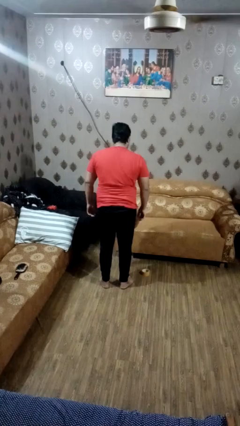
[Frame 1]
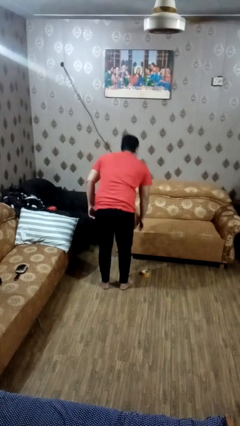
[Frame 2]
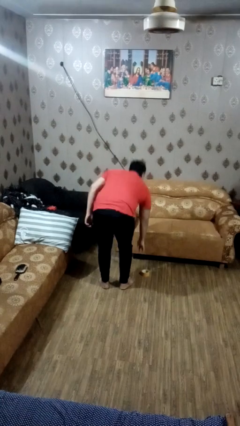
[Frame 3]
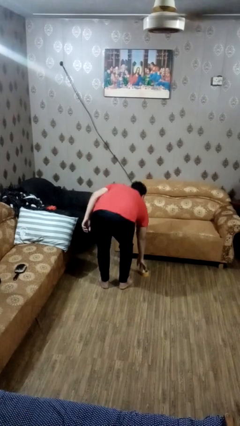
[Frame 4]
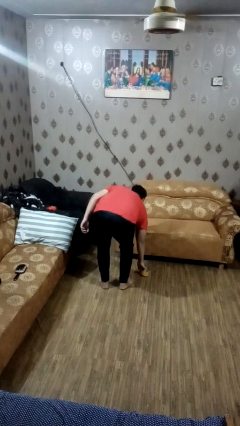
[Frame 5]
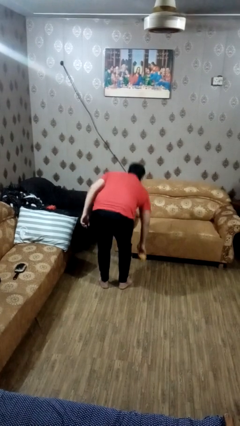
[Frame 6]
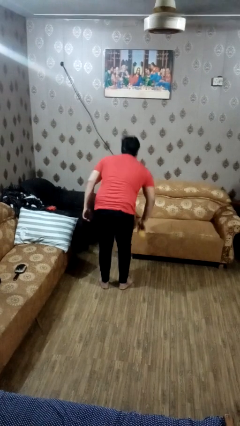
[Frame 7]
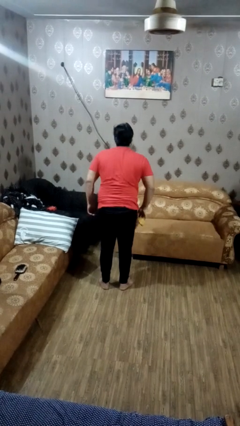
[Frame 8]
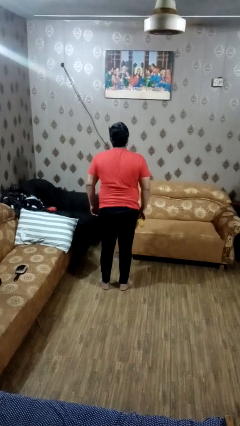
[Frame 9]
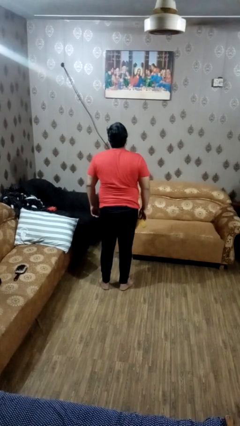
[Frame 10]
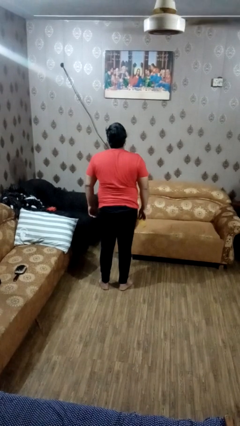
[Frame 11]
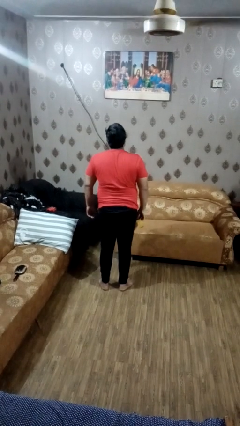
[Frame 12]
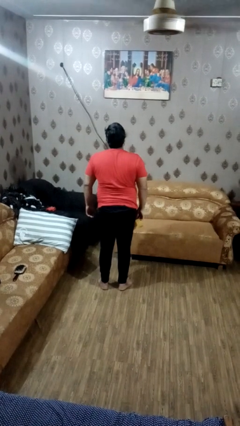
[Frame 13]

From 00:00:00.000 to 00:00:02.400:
person picks up object from floor

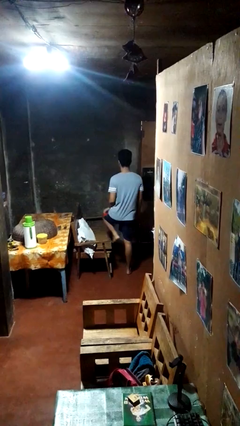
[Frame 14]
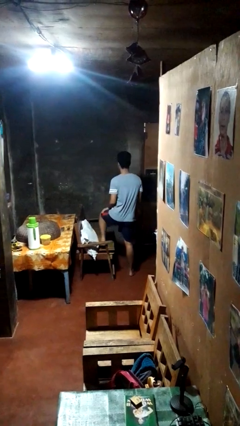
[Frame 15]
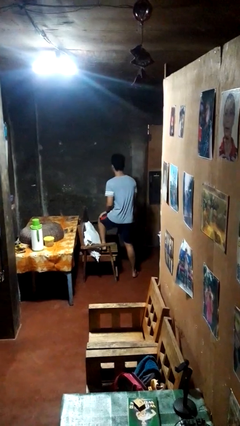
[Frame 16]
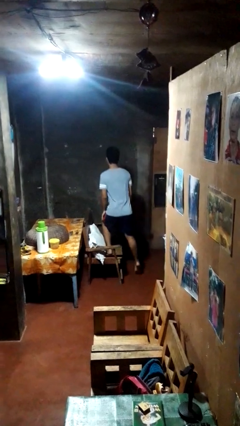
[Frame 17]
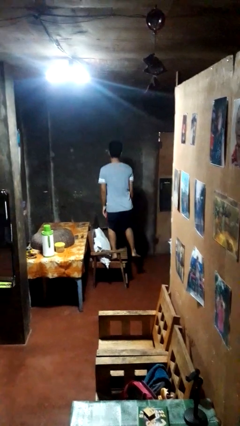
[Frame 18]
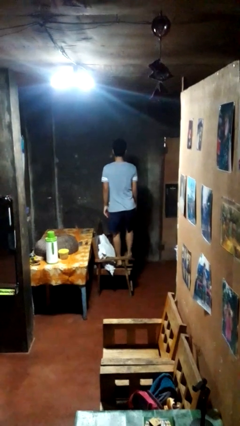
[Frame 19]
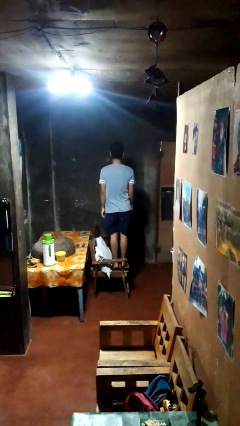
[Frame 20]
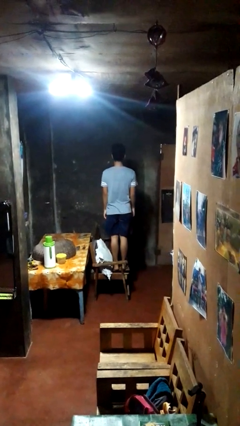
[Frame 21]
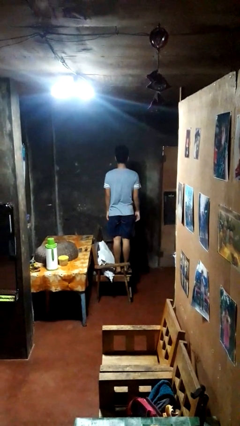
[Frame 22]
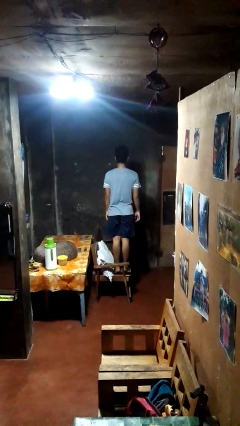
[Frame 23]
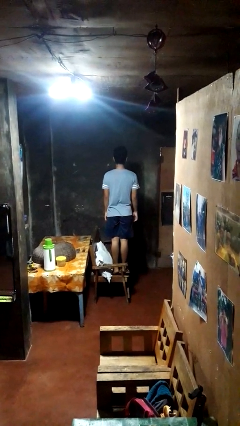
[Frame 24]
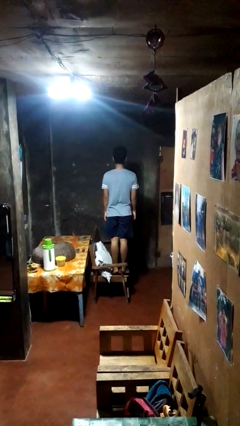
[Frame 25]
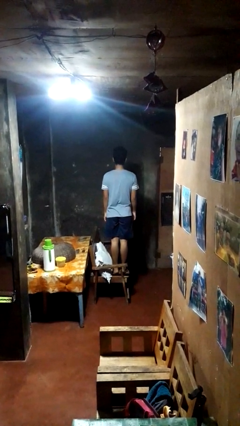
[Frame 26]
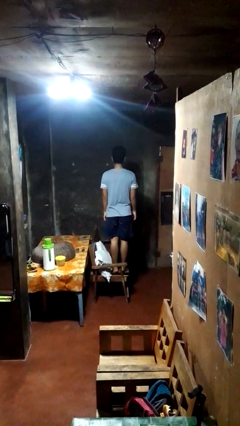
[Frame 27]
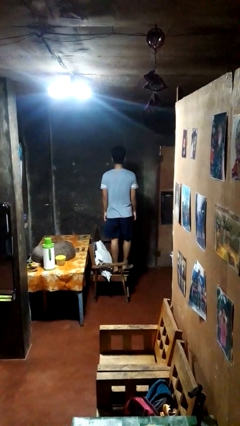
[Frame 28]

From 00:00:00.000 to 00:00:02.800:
person climbs on couch

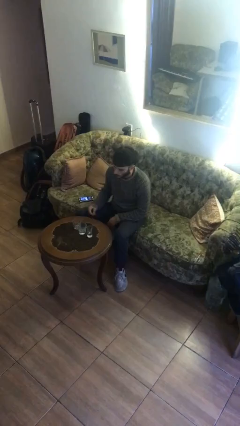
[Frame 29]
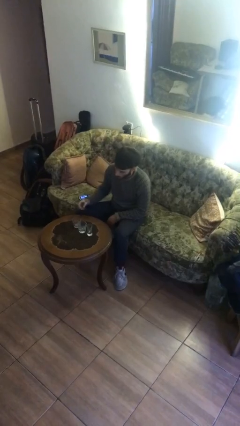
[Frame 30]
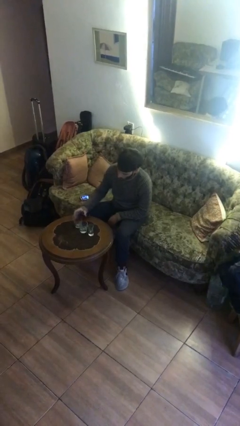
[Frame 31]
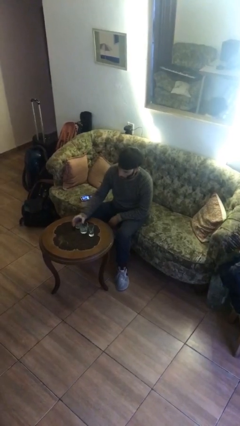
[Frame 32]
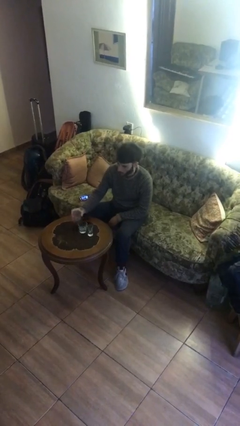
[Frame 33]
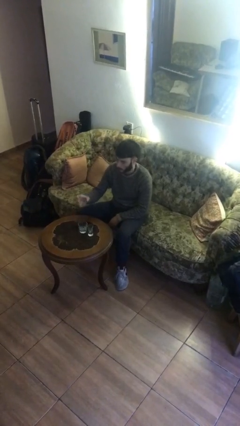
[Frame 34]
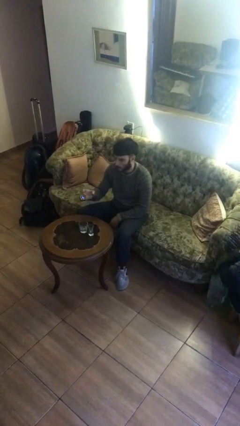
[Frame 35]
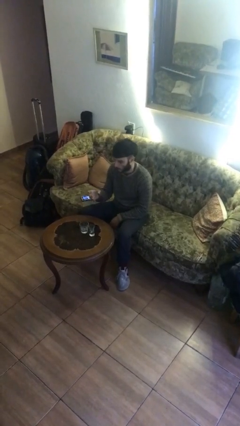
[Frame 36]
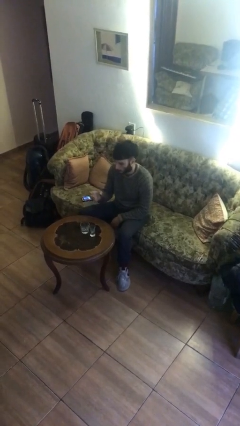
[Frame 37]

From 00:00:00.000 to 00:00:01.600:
person picks up object from table

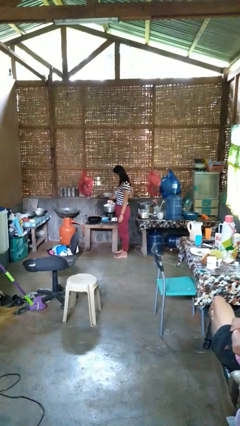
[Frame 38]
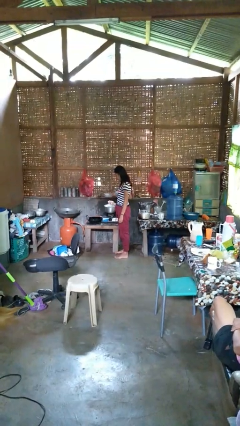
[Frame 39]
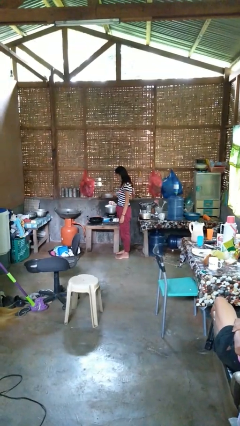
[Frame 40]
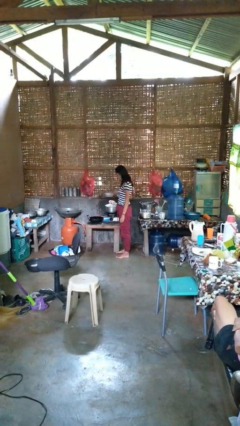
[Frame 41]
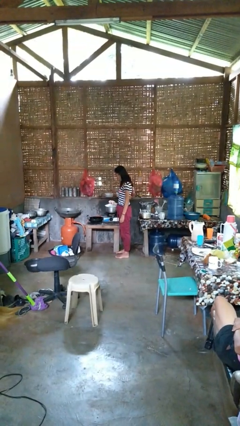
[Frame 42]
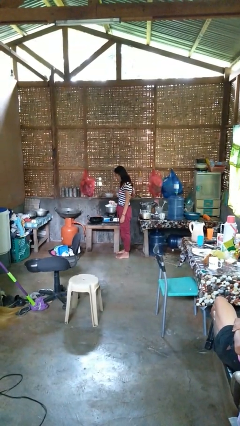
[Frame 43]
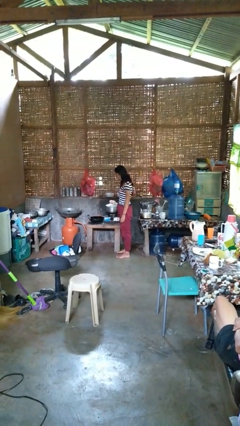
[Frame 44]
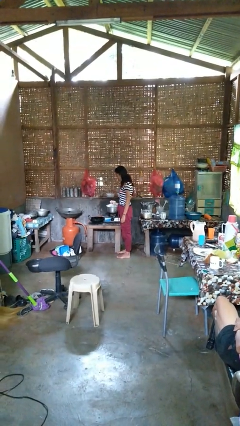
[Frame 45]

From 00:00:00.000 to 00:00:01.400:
person burns hand

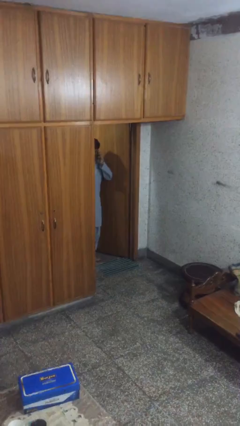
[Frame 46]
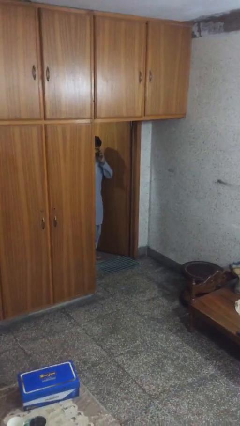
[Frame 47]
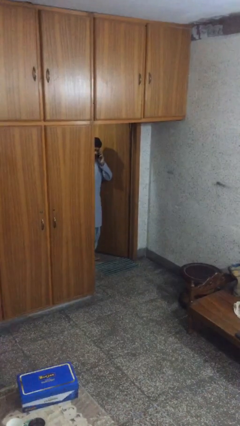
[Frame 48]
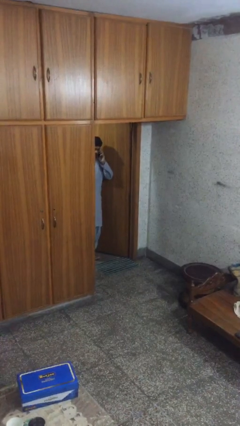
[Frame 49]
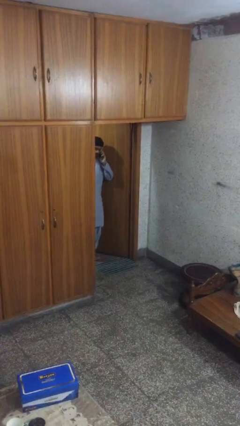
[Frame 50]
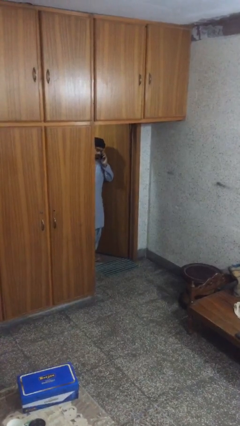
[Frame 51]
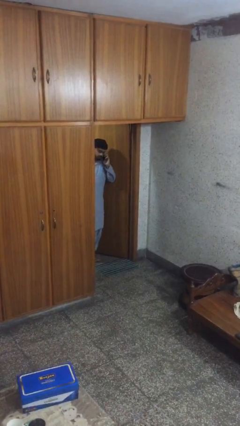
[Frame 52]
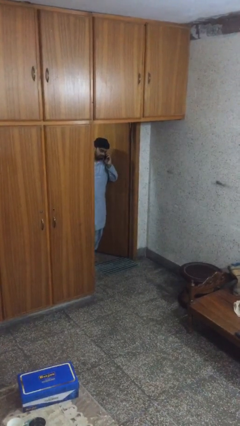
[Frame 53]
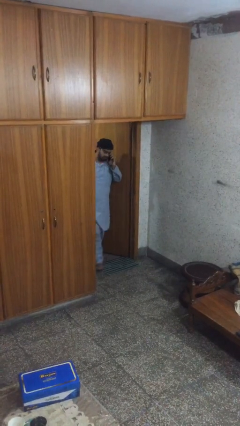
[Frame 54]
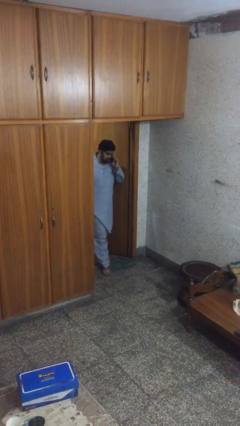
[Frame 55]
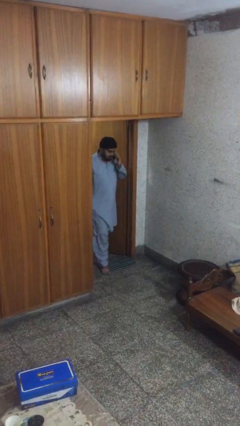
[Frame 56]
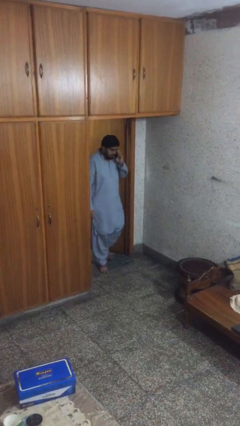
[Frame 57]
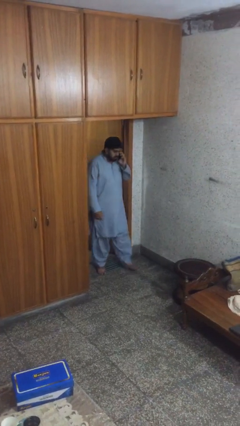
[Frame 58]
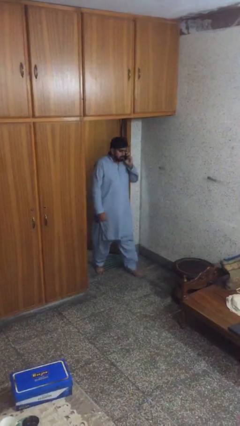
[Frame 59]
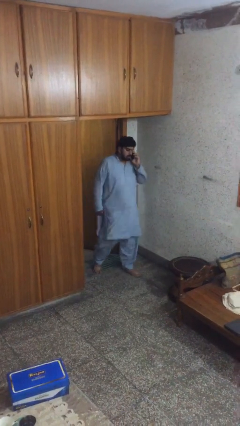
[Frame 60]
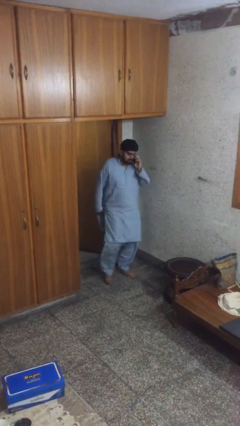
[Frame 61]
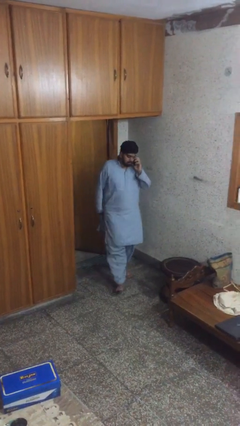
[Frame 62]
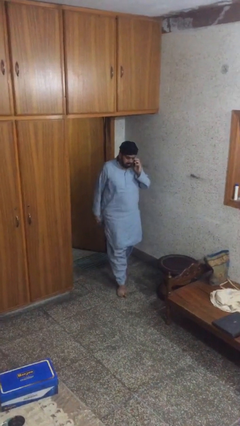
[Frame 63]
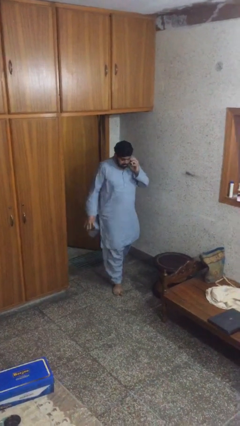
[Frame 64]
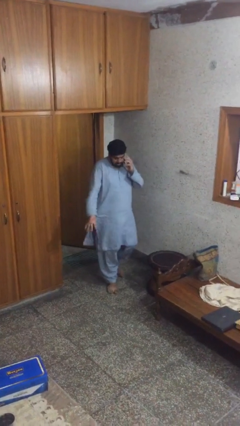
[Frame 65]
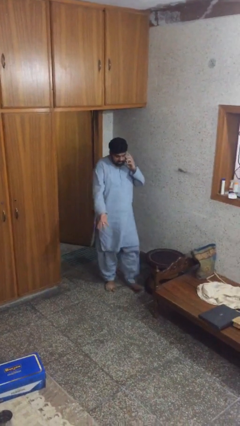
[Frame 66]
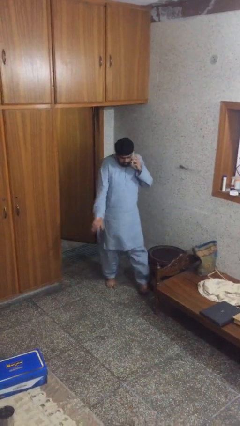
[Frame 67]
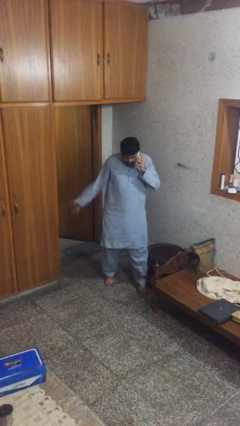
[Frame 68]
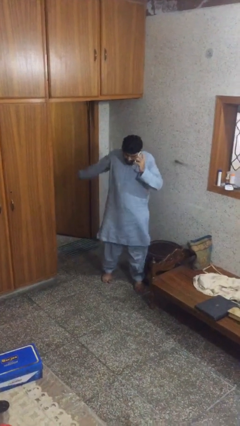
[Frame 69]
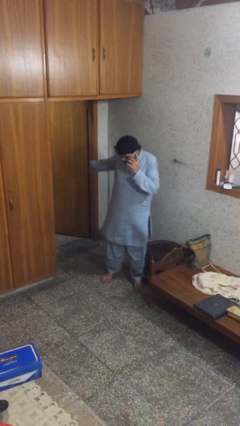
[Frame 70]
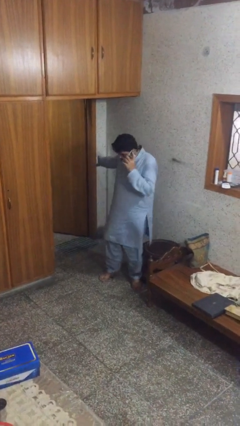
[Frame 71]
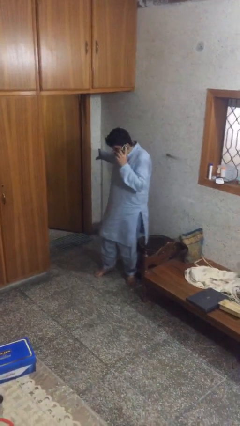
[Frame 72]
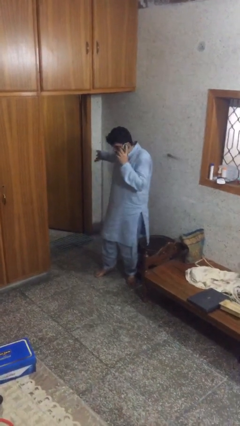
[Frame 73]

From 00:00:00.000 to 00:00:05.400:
person enters scene through structure

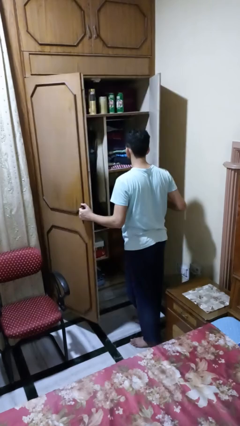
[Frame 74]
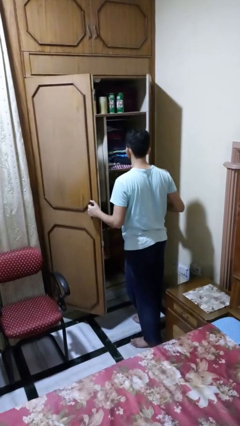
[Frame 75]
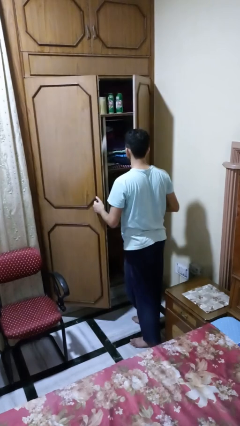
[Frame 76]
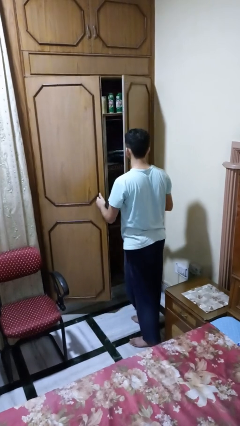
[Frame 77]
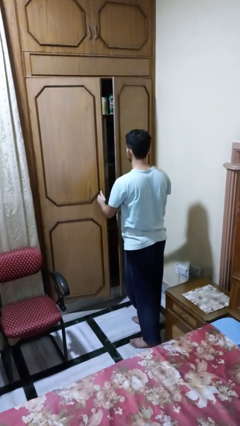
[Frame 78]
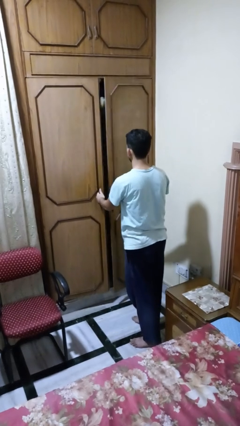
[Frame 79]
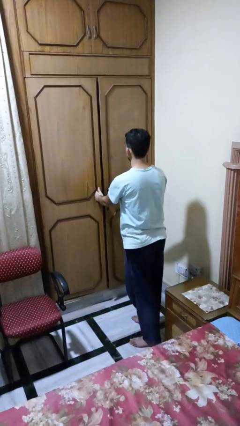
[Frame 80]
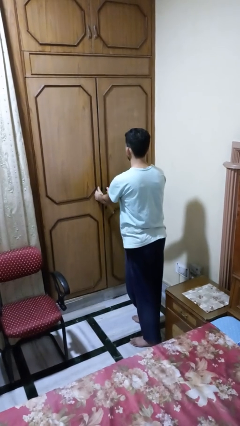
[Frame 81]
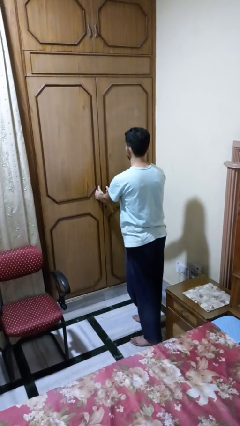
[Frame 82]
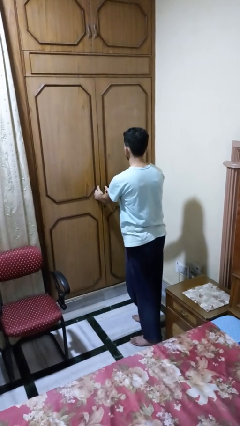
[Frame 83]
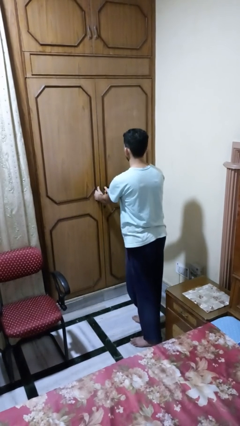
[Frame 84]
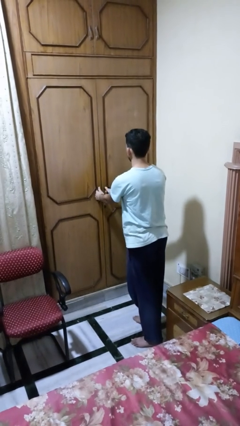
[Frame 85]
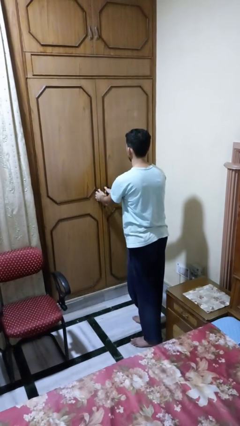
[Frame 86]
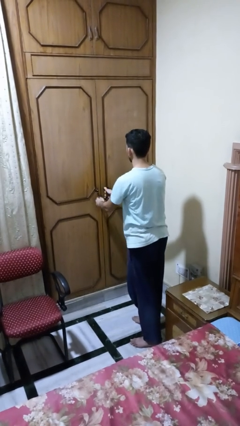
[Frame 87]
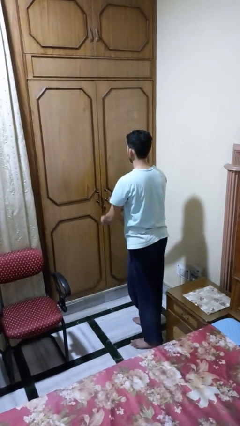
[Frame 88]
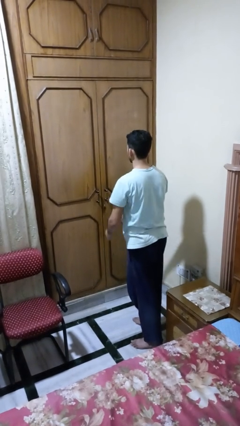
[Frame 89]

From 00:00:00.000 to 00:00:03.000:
person closes closet door

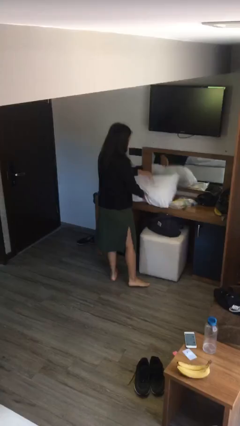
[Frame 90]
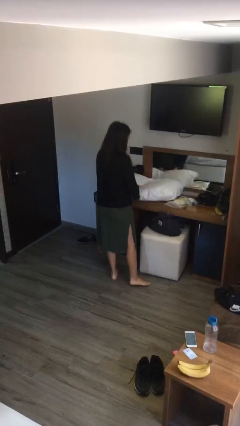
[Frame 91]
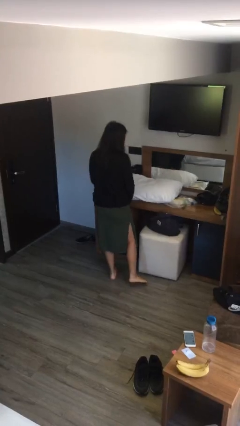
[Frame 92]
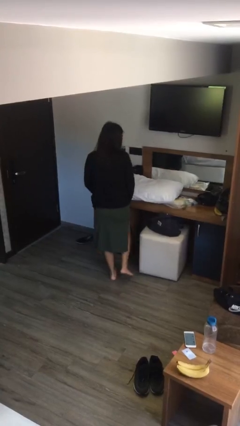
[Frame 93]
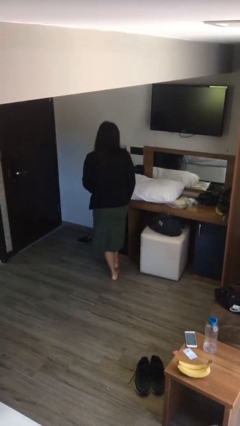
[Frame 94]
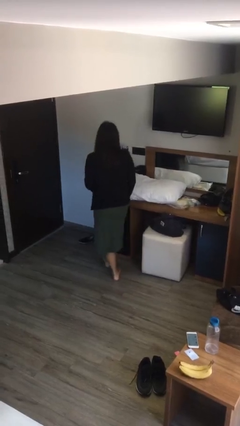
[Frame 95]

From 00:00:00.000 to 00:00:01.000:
person puts down object on table
